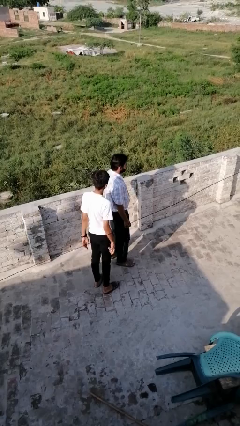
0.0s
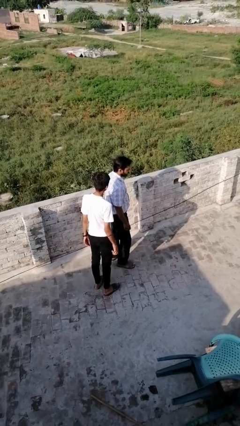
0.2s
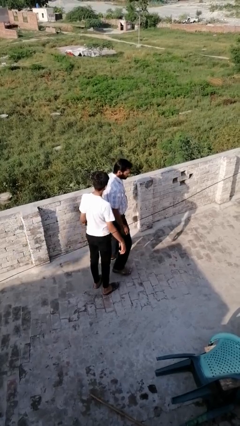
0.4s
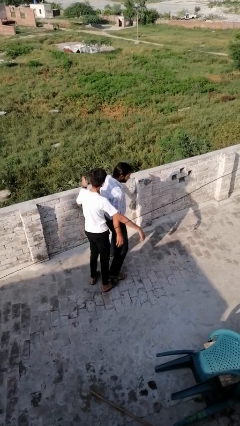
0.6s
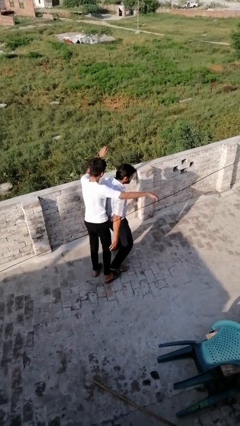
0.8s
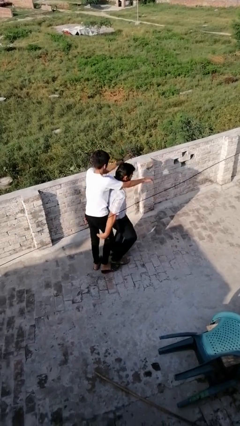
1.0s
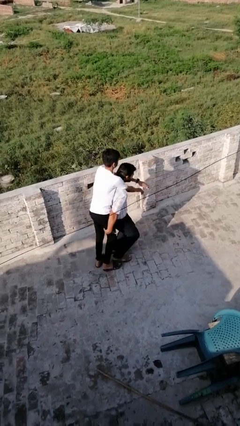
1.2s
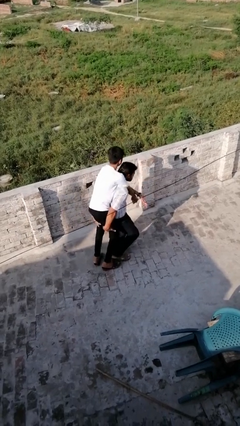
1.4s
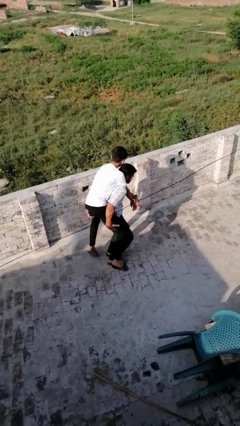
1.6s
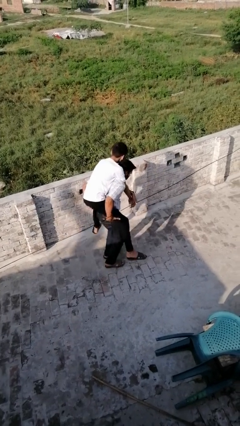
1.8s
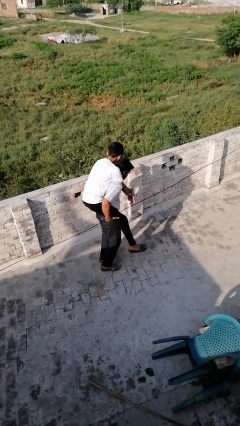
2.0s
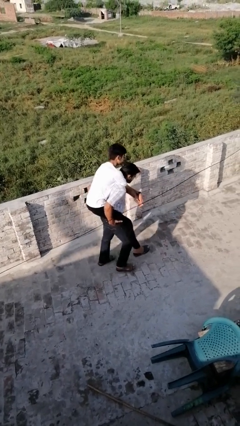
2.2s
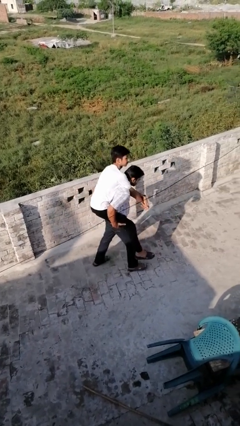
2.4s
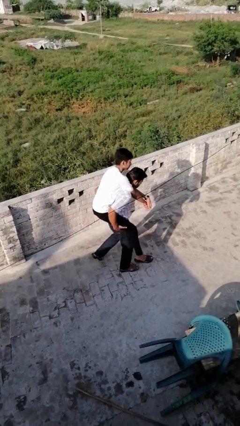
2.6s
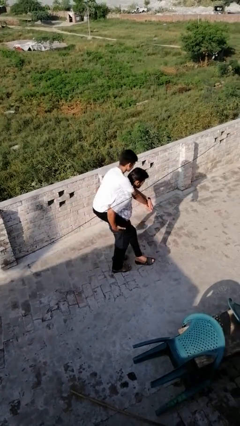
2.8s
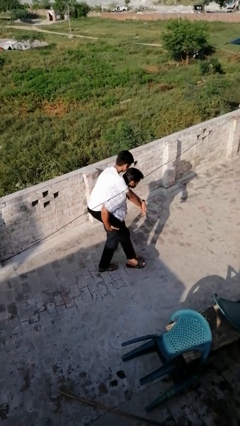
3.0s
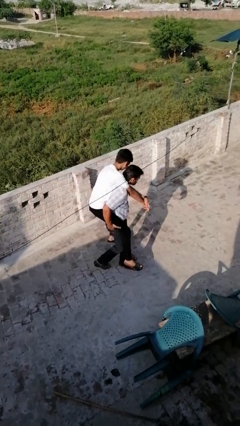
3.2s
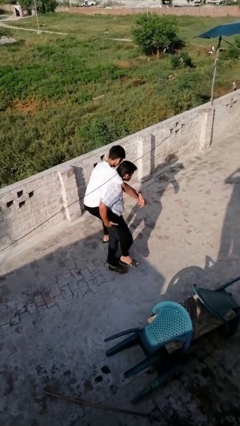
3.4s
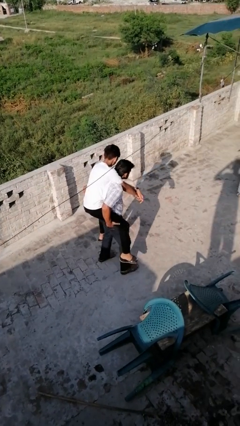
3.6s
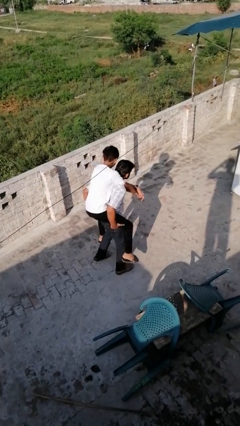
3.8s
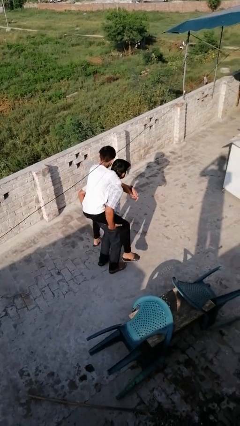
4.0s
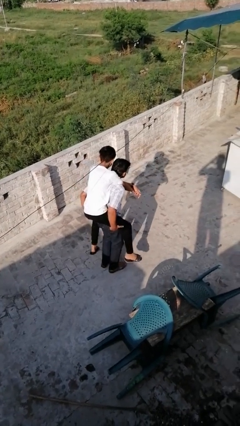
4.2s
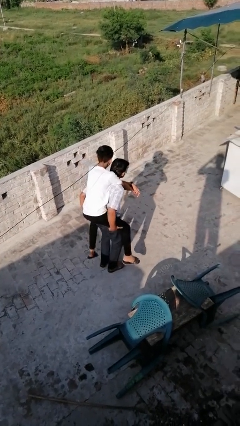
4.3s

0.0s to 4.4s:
person carries person on back

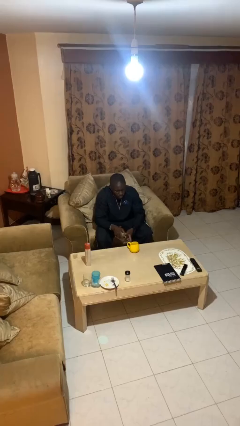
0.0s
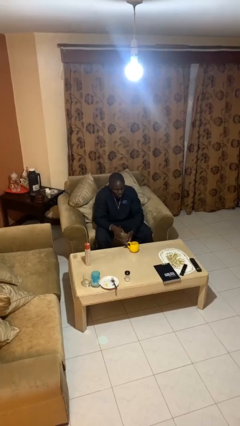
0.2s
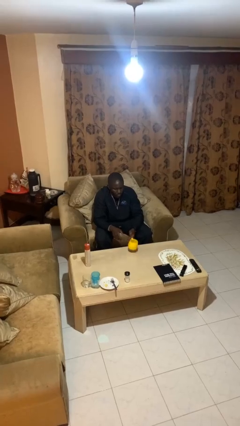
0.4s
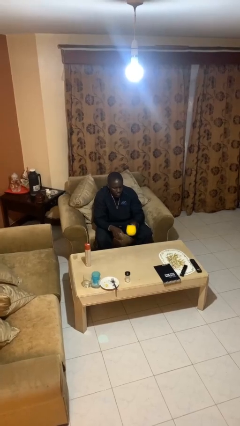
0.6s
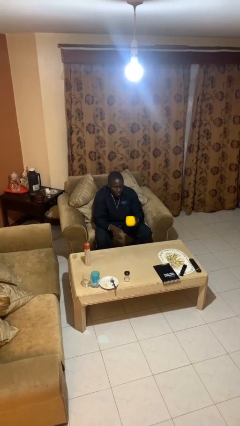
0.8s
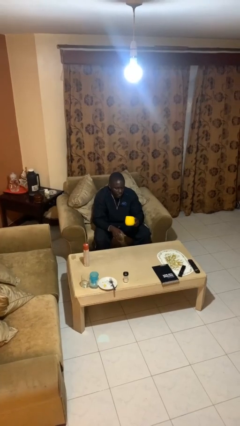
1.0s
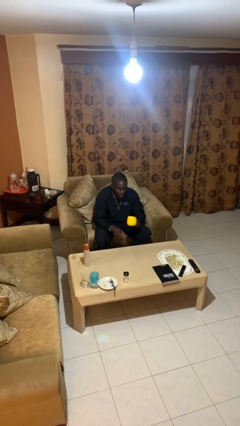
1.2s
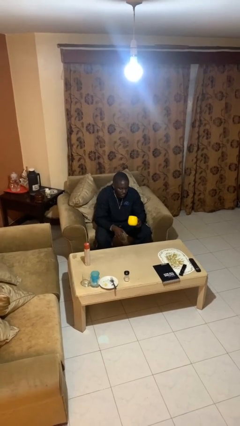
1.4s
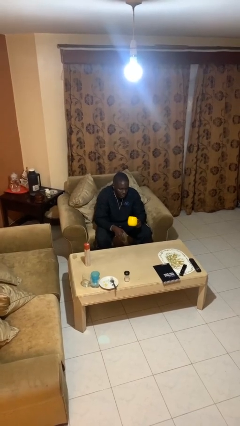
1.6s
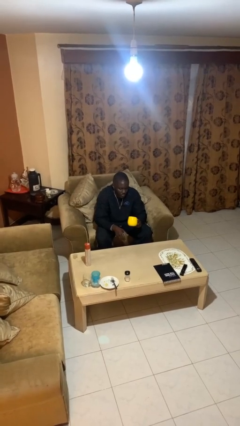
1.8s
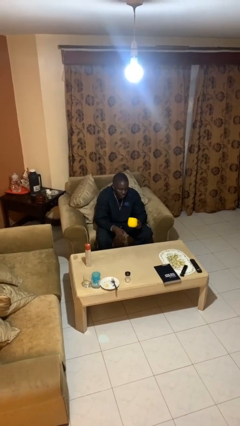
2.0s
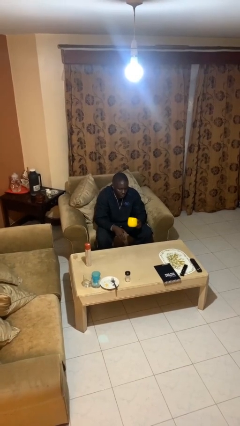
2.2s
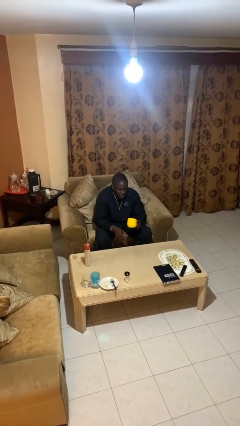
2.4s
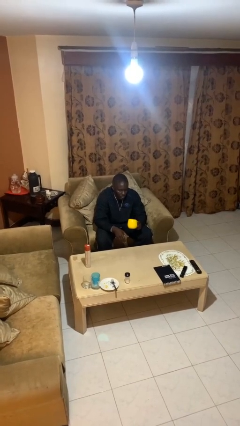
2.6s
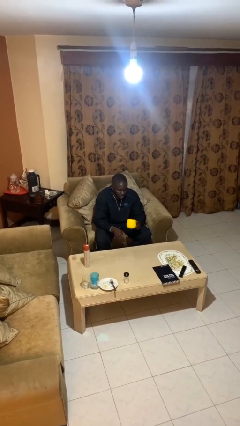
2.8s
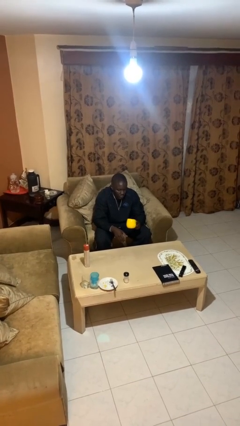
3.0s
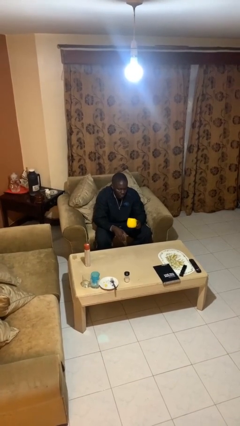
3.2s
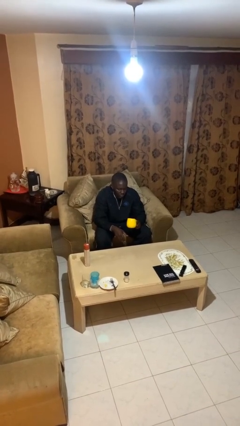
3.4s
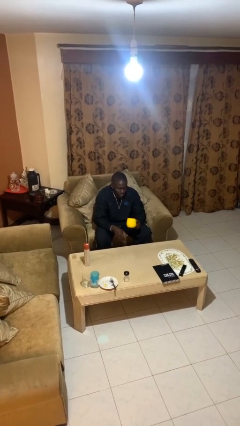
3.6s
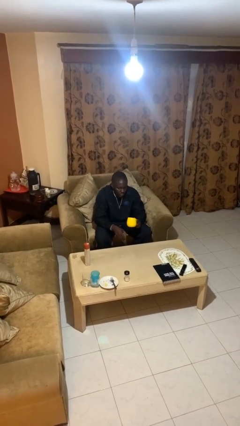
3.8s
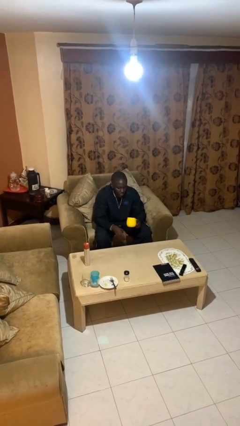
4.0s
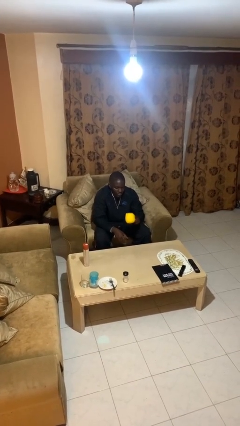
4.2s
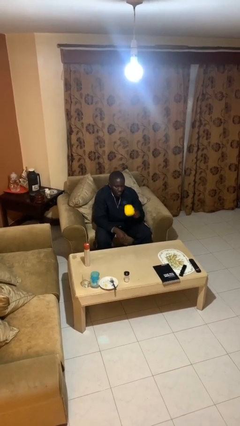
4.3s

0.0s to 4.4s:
person picks up object from table

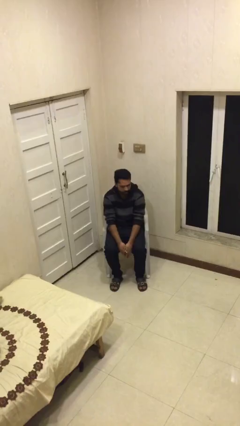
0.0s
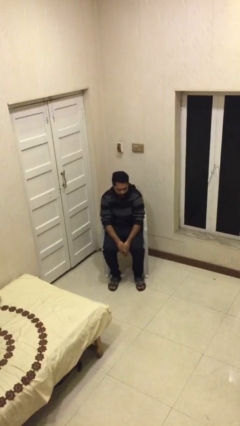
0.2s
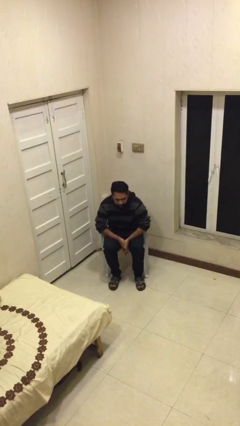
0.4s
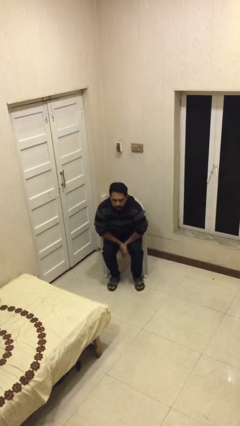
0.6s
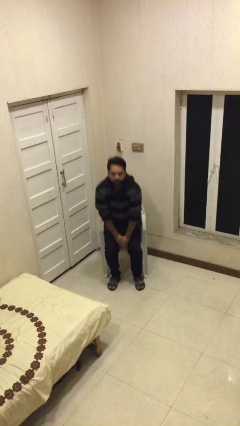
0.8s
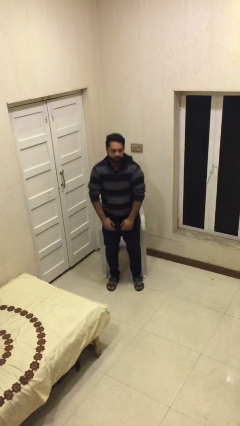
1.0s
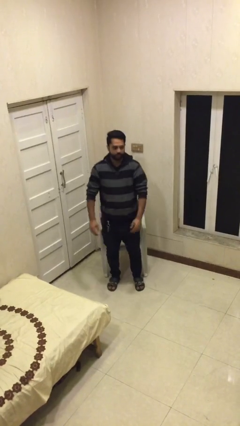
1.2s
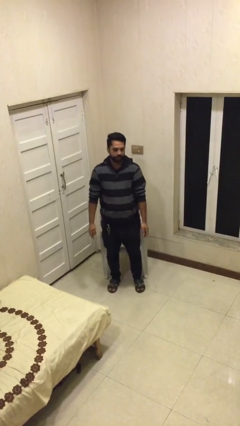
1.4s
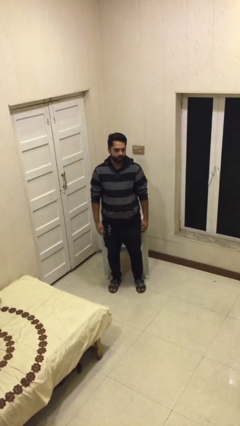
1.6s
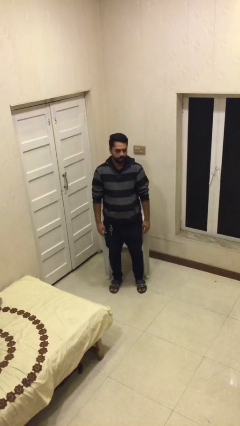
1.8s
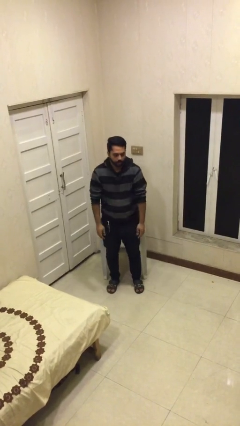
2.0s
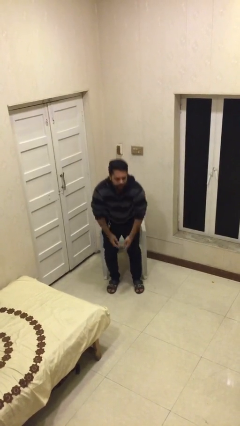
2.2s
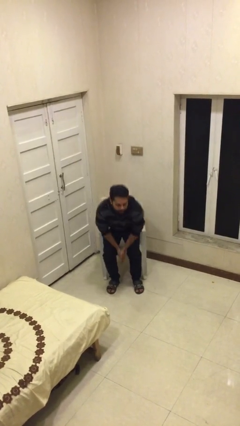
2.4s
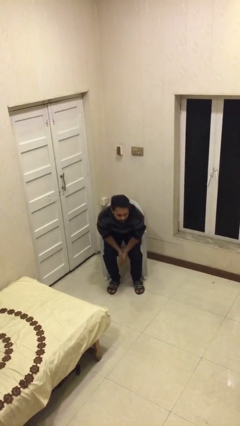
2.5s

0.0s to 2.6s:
person stands up

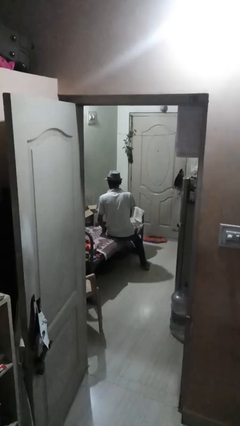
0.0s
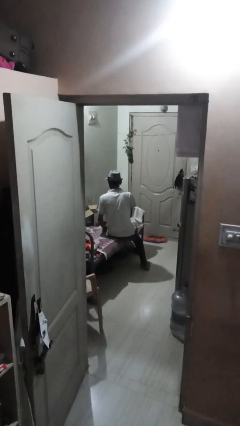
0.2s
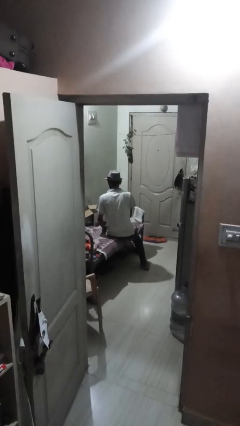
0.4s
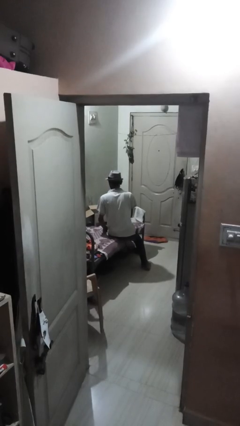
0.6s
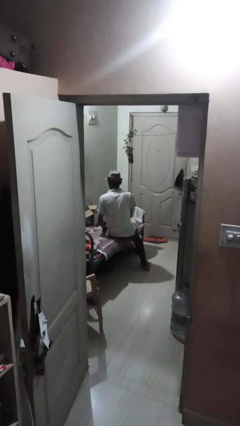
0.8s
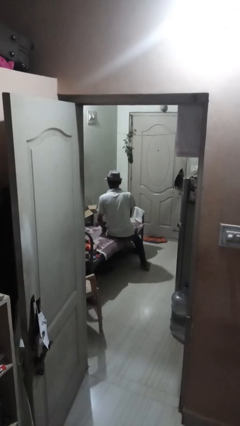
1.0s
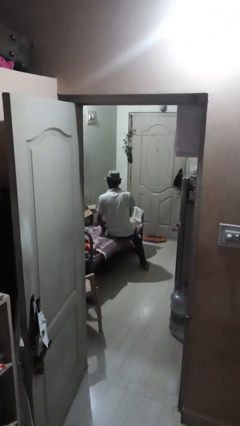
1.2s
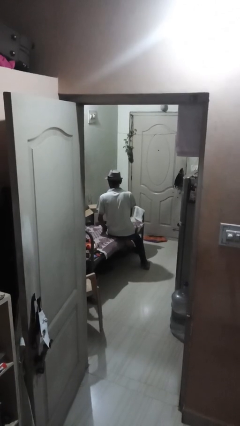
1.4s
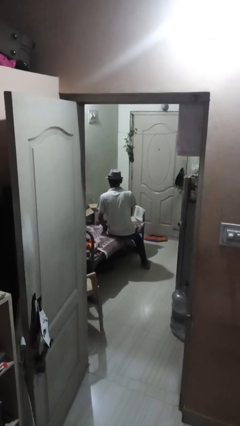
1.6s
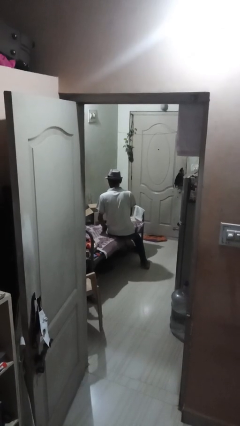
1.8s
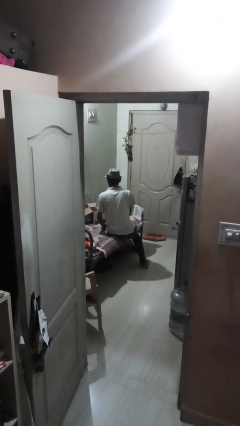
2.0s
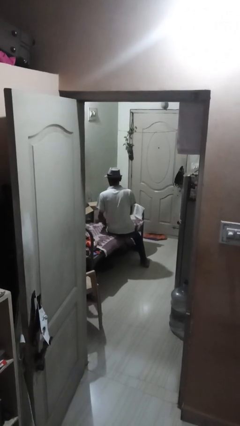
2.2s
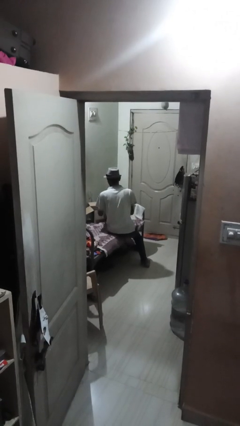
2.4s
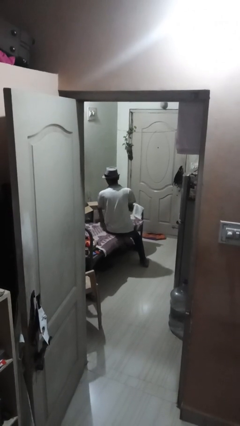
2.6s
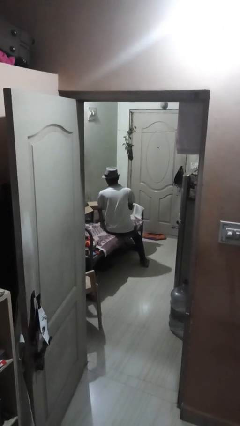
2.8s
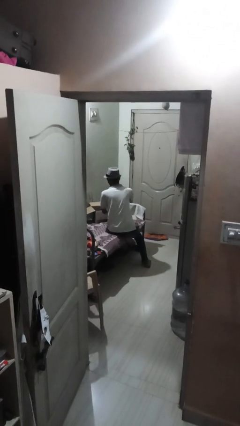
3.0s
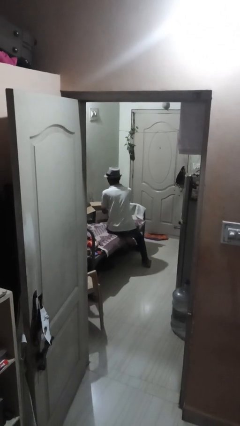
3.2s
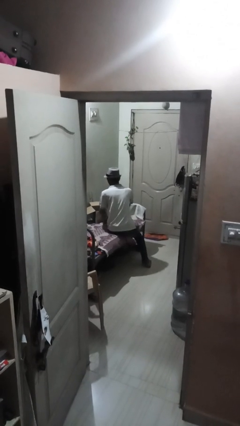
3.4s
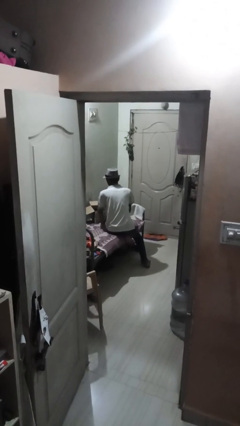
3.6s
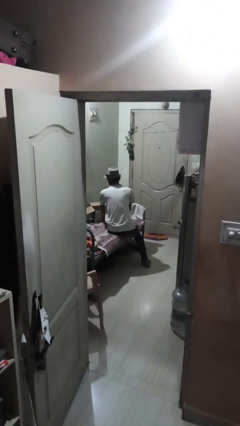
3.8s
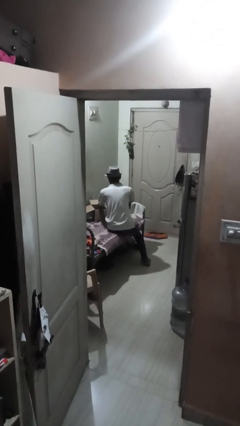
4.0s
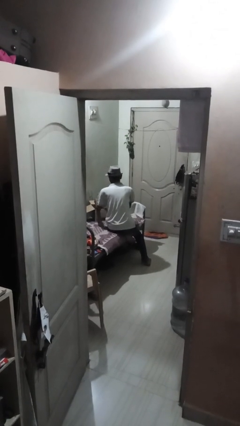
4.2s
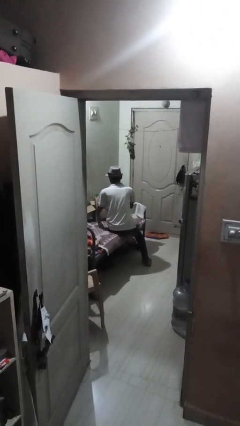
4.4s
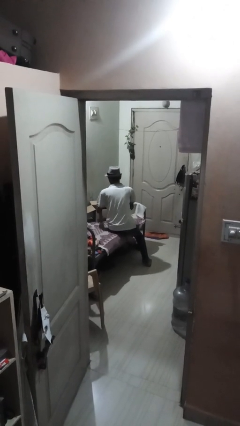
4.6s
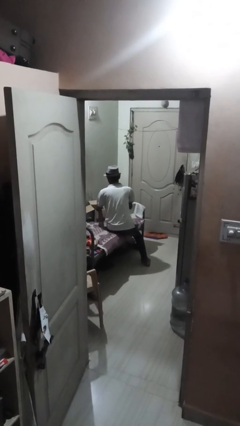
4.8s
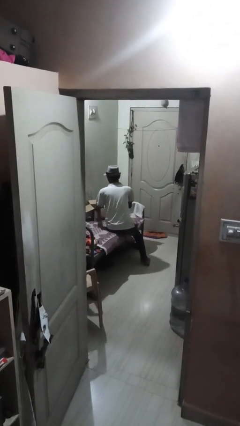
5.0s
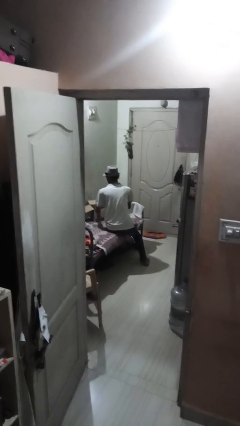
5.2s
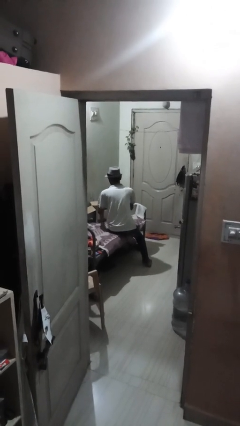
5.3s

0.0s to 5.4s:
person searches in box

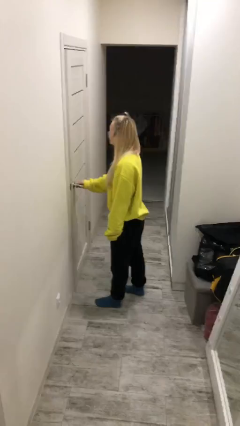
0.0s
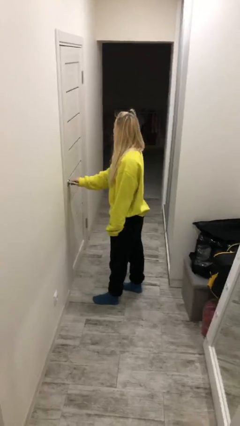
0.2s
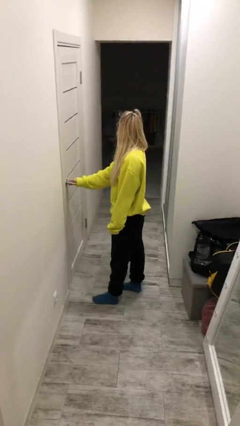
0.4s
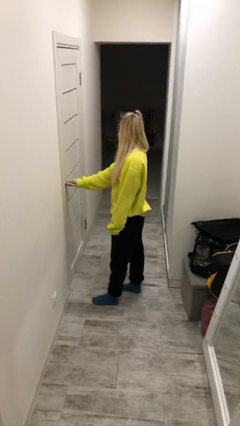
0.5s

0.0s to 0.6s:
person closes facility door
